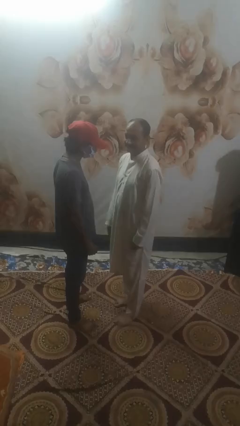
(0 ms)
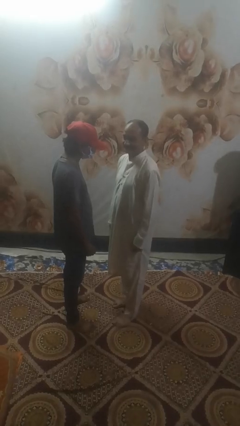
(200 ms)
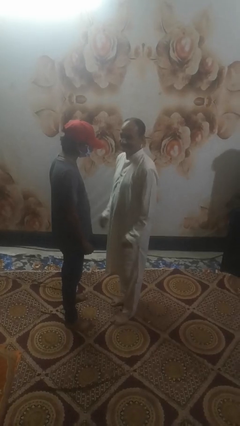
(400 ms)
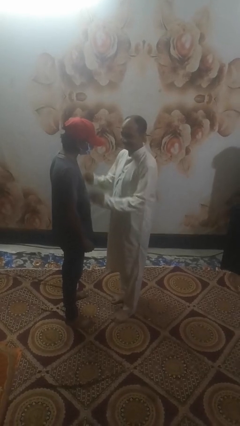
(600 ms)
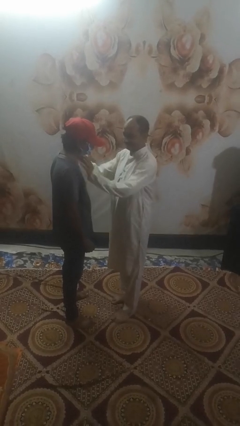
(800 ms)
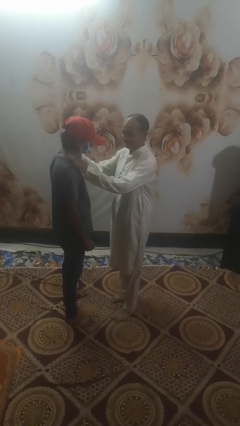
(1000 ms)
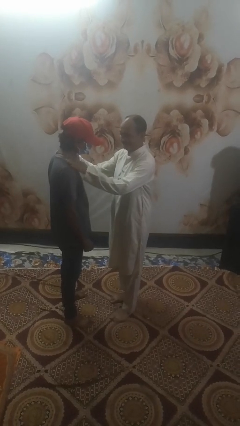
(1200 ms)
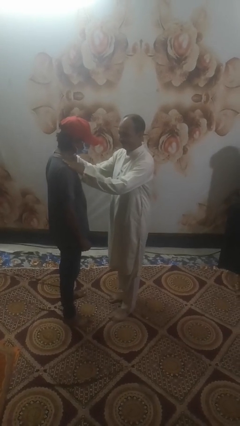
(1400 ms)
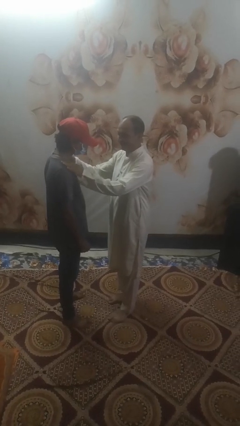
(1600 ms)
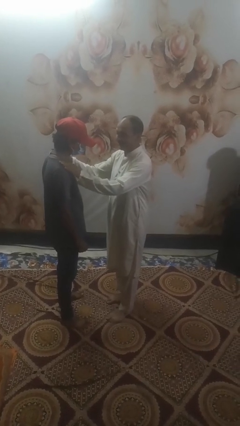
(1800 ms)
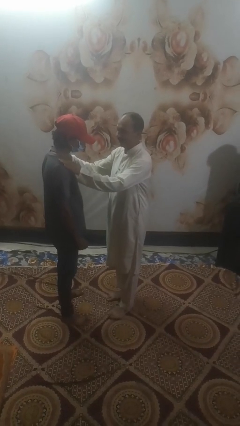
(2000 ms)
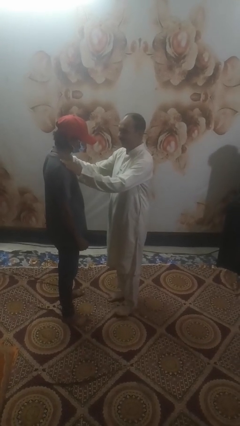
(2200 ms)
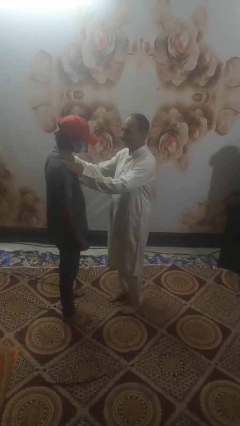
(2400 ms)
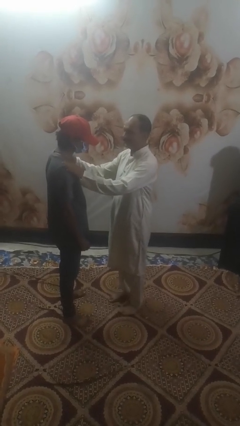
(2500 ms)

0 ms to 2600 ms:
person pounds shoulders of person

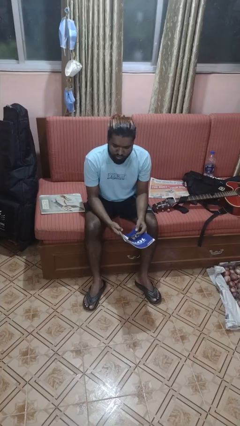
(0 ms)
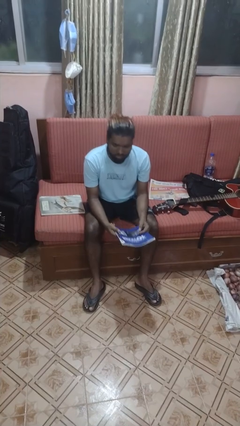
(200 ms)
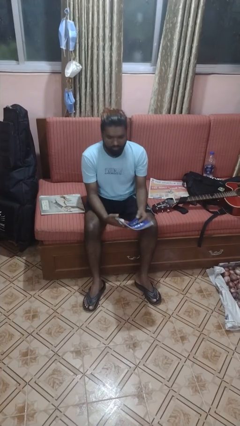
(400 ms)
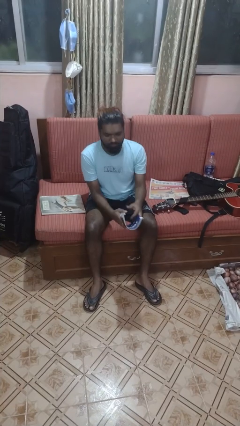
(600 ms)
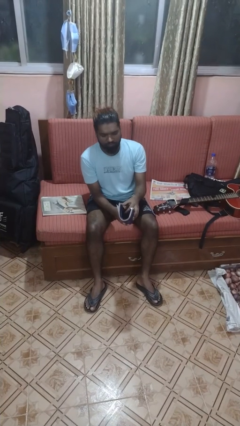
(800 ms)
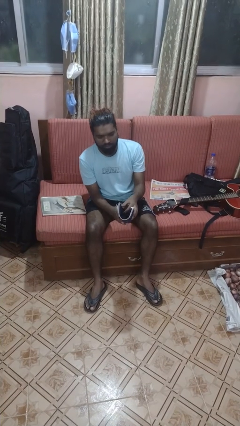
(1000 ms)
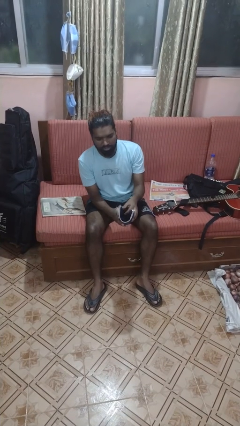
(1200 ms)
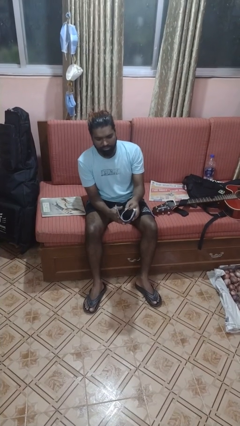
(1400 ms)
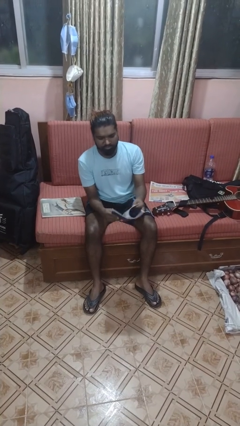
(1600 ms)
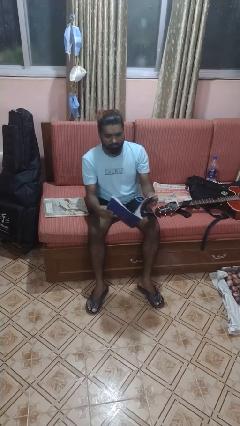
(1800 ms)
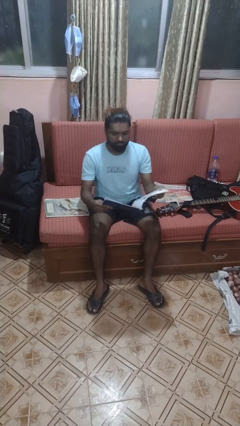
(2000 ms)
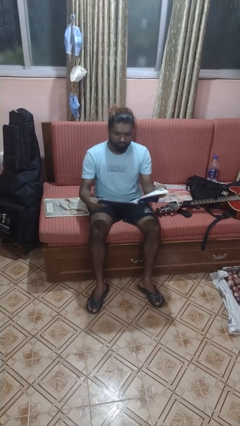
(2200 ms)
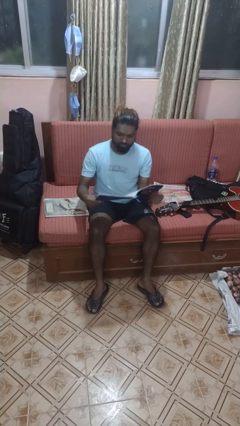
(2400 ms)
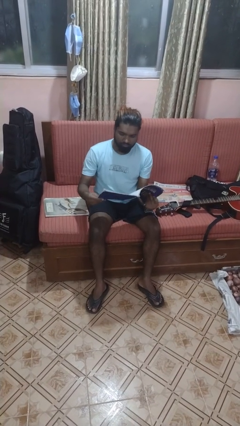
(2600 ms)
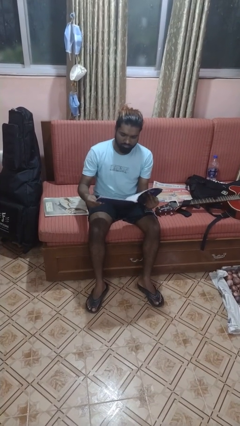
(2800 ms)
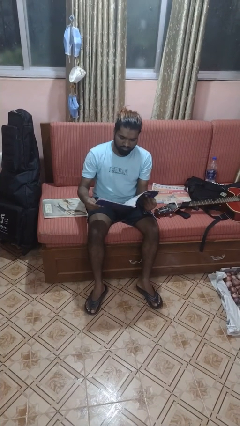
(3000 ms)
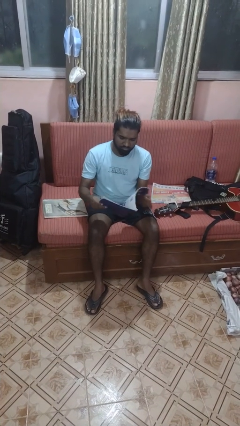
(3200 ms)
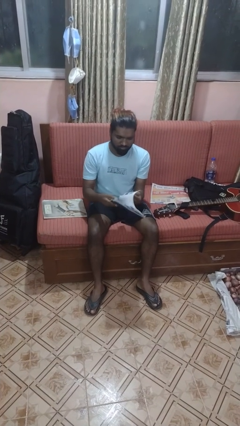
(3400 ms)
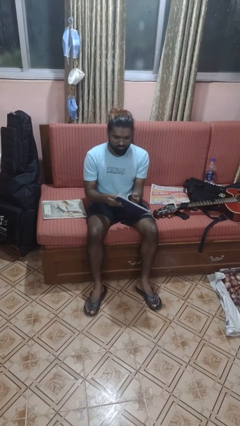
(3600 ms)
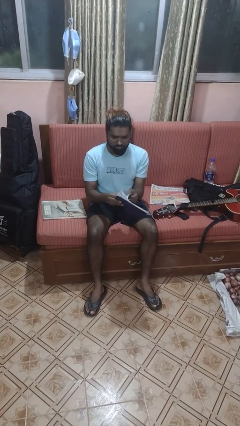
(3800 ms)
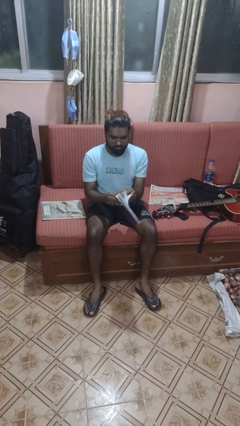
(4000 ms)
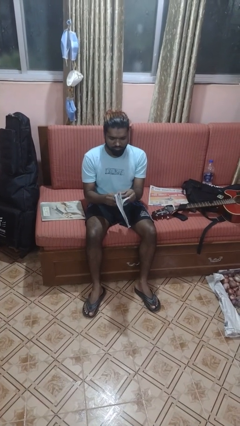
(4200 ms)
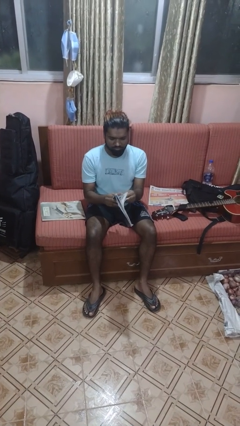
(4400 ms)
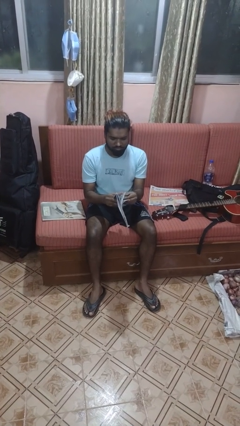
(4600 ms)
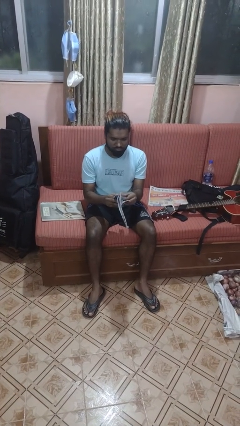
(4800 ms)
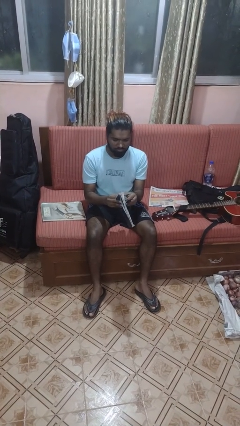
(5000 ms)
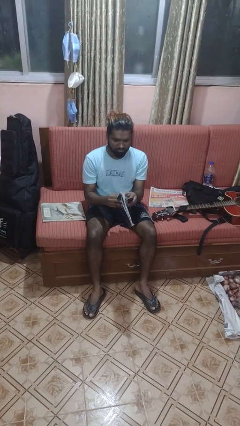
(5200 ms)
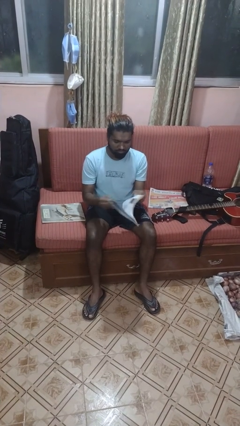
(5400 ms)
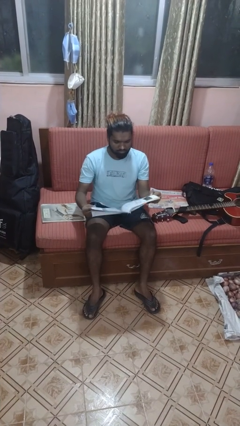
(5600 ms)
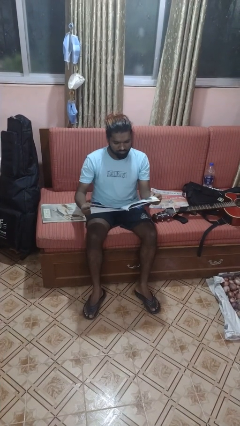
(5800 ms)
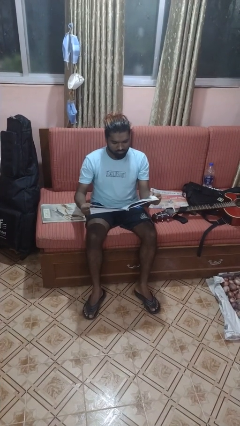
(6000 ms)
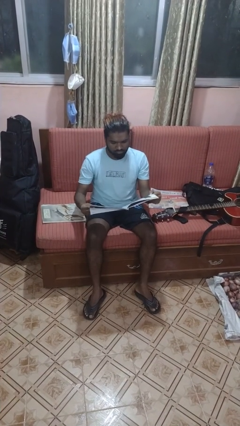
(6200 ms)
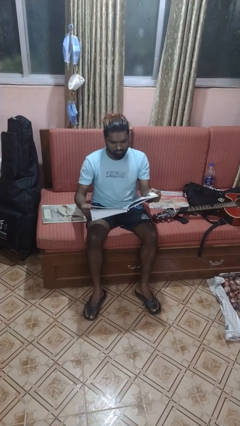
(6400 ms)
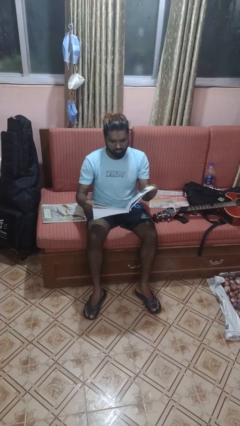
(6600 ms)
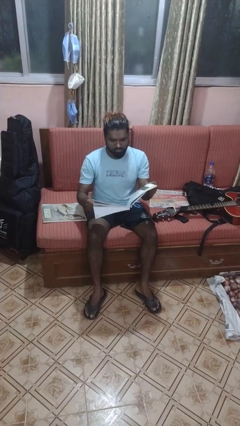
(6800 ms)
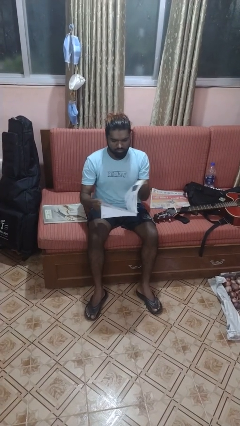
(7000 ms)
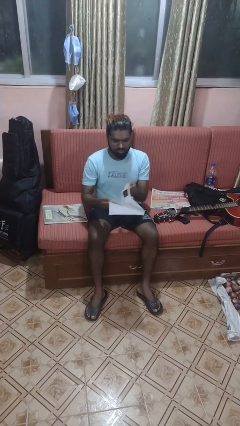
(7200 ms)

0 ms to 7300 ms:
person reads magazine

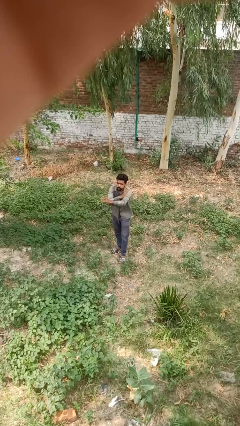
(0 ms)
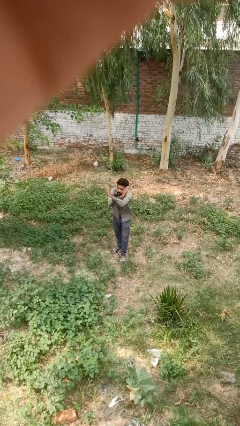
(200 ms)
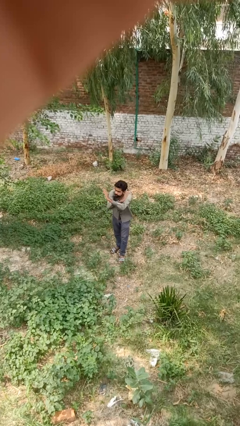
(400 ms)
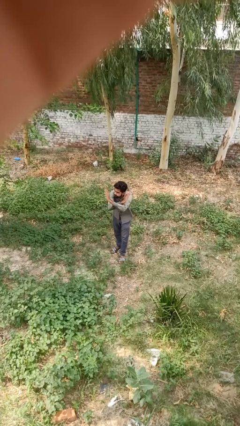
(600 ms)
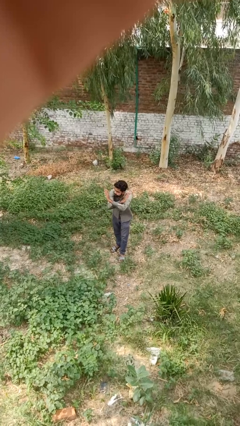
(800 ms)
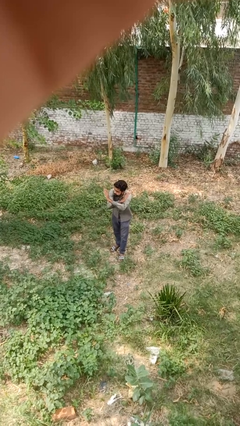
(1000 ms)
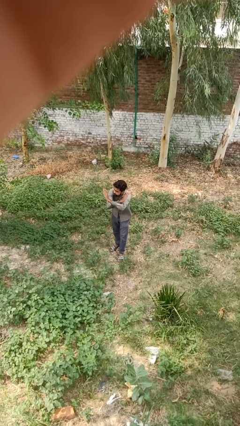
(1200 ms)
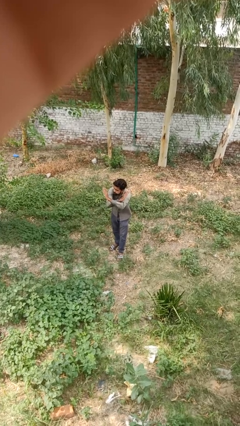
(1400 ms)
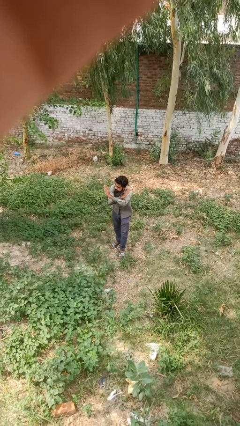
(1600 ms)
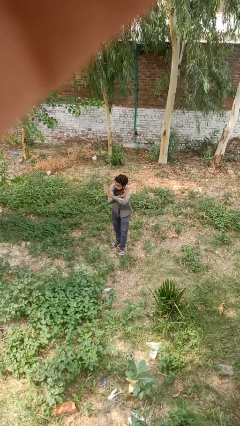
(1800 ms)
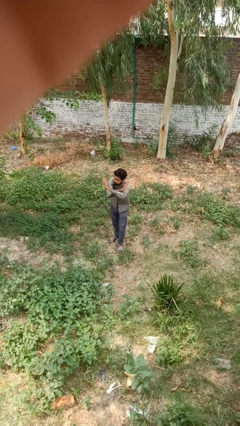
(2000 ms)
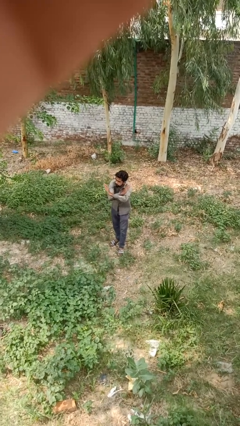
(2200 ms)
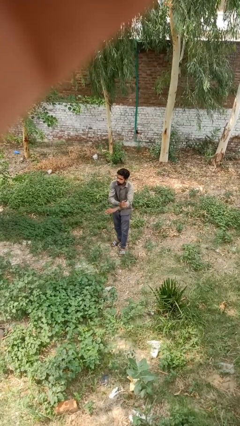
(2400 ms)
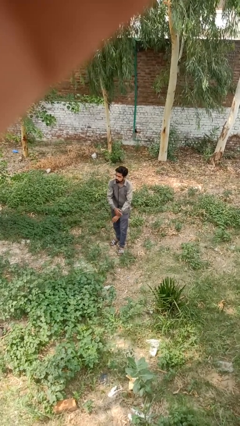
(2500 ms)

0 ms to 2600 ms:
person crosses arms

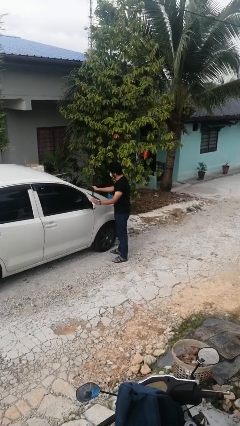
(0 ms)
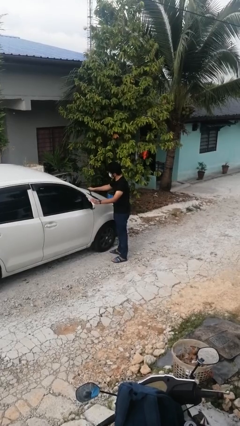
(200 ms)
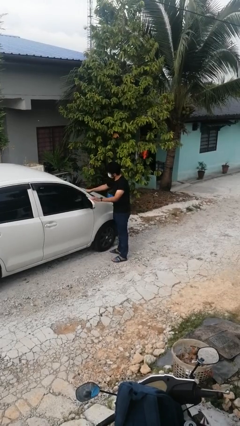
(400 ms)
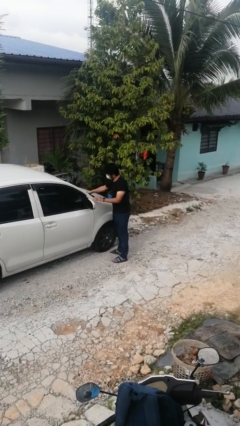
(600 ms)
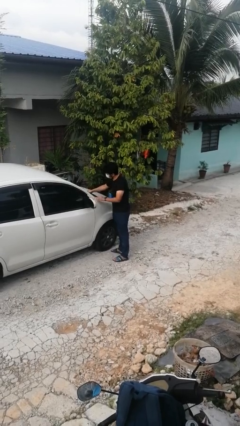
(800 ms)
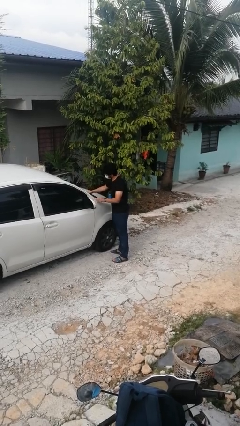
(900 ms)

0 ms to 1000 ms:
person flips down car wipers

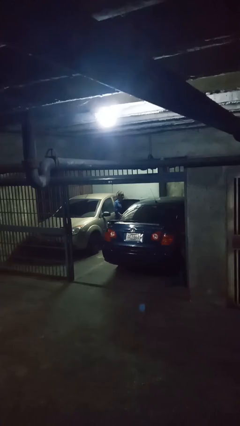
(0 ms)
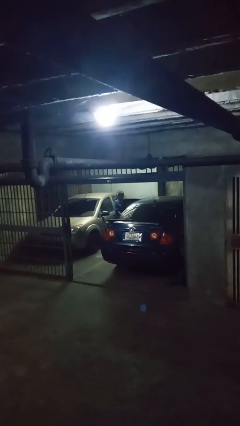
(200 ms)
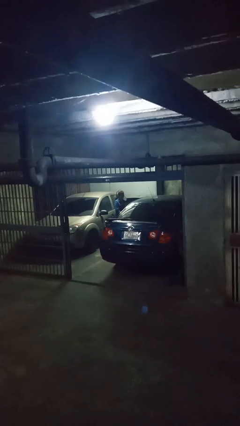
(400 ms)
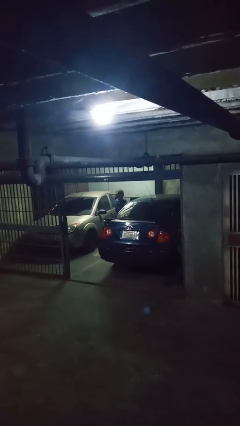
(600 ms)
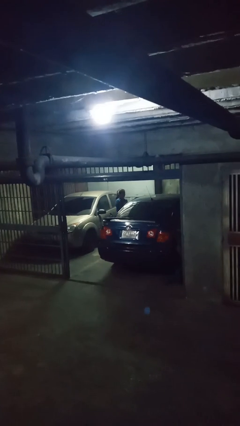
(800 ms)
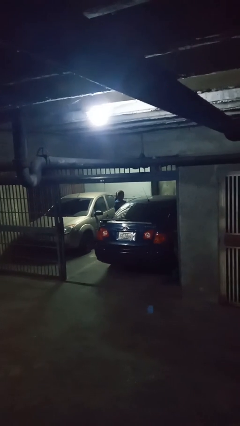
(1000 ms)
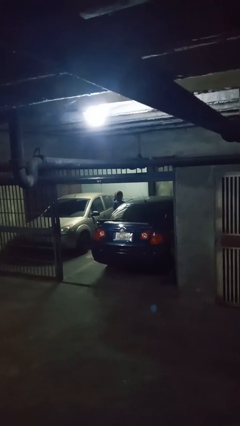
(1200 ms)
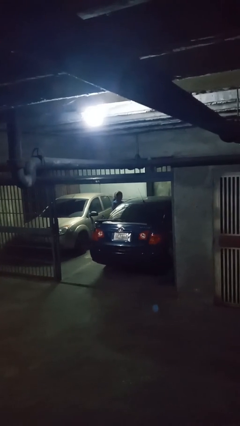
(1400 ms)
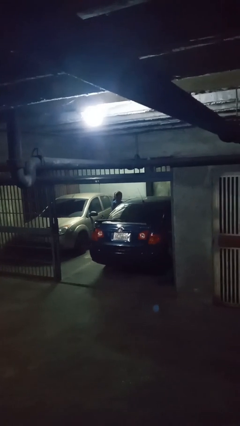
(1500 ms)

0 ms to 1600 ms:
person closes car door

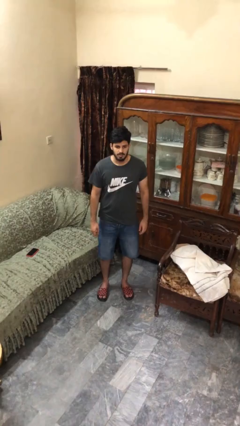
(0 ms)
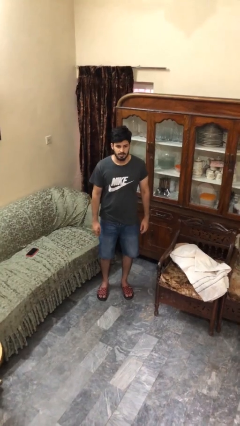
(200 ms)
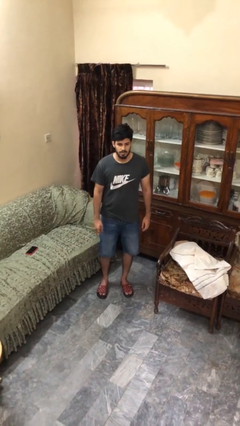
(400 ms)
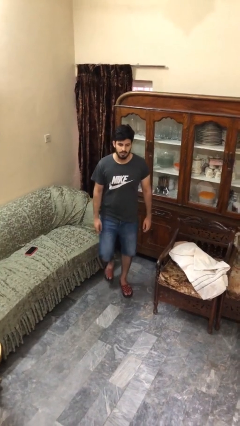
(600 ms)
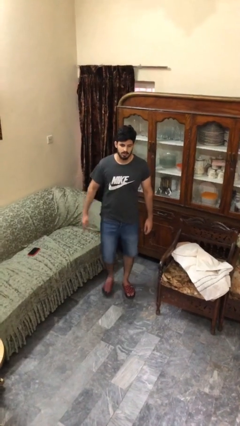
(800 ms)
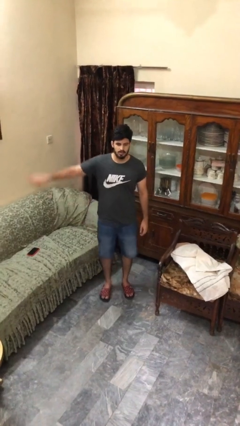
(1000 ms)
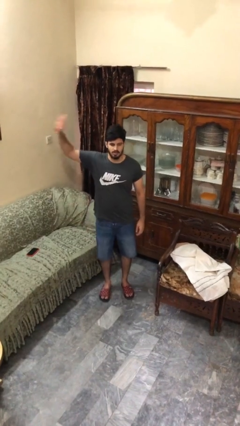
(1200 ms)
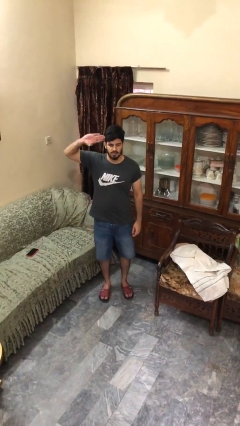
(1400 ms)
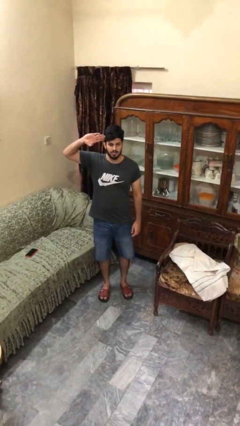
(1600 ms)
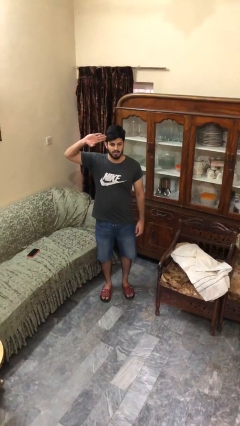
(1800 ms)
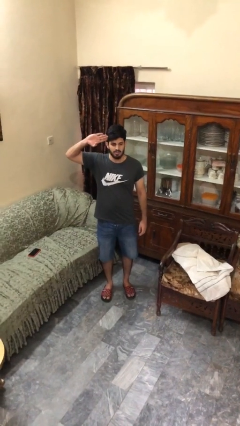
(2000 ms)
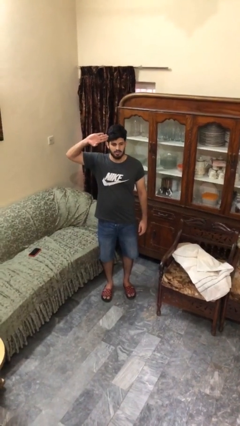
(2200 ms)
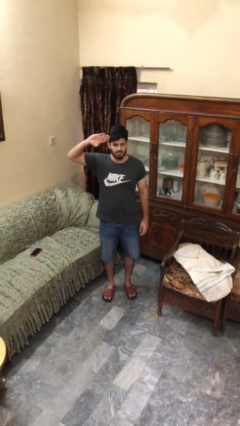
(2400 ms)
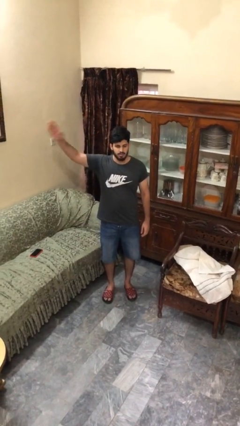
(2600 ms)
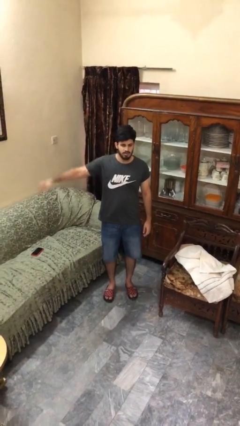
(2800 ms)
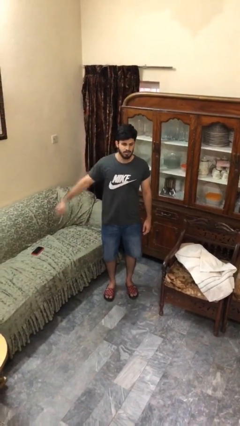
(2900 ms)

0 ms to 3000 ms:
person salutes
